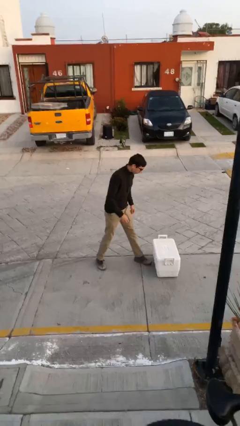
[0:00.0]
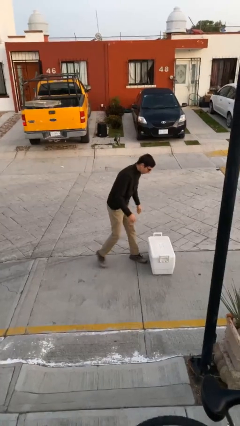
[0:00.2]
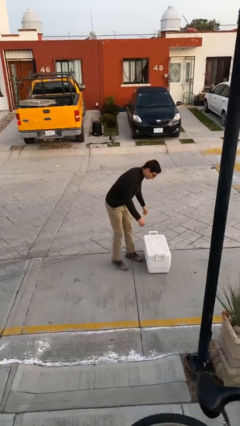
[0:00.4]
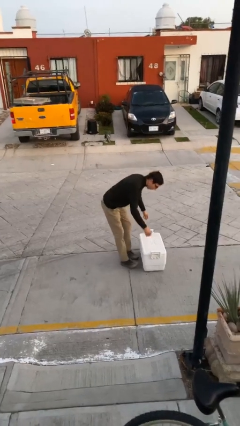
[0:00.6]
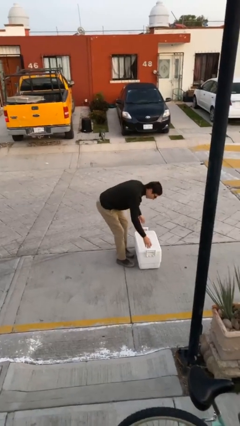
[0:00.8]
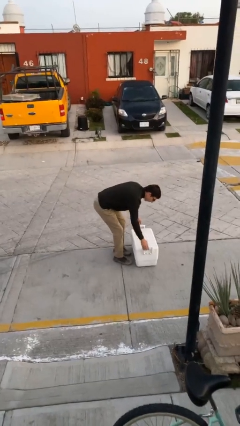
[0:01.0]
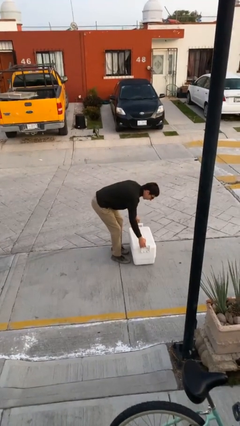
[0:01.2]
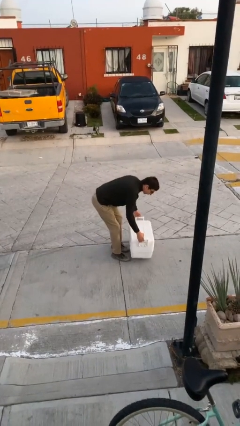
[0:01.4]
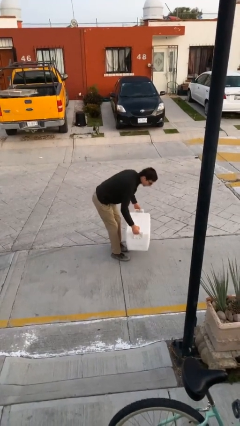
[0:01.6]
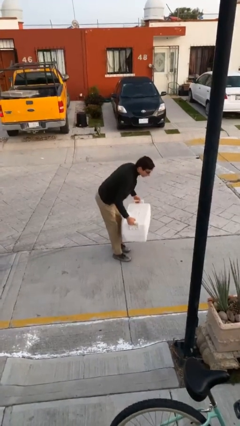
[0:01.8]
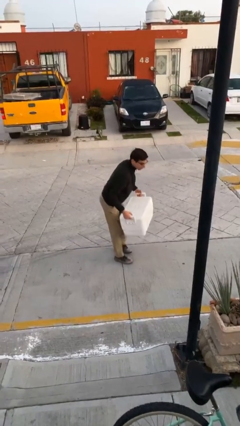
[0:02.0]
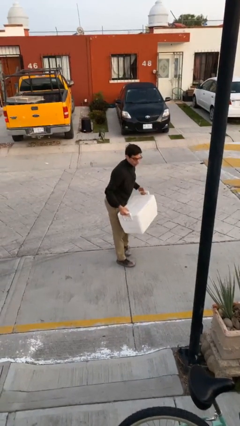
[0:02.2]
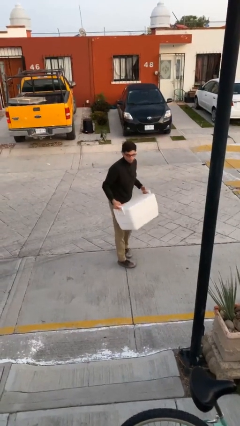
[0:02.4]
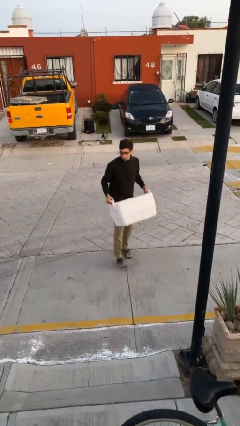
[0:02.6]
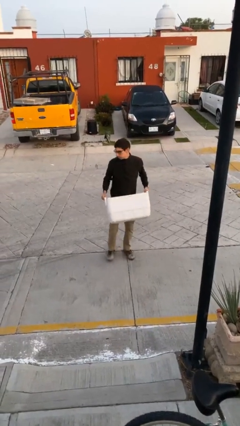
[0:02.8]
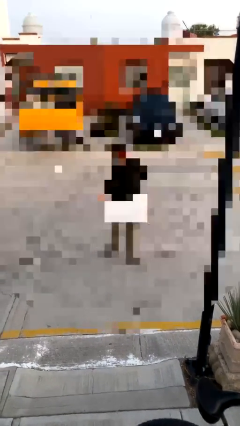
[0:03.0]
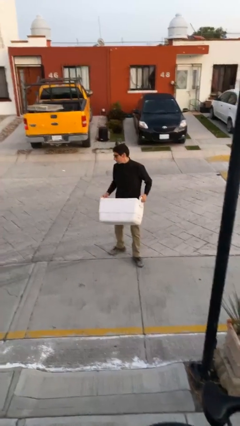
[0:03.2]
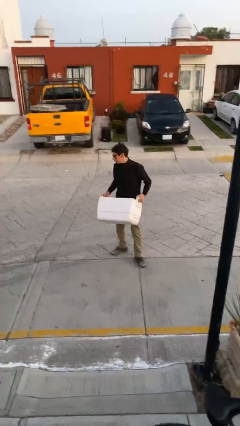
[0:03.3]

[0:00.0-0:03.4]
person picks up object from floor

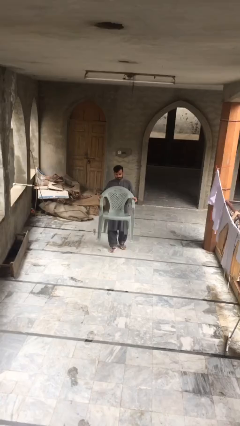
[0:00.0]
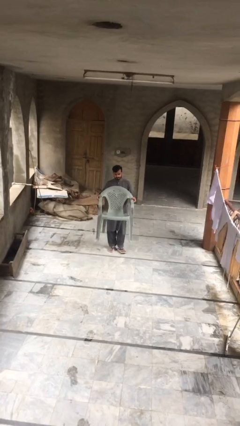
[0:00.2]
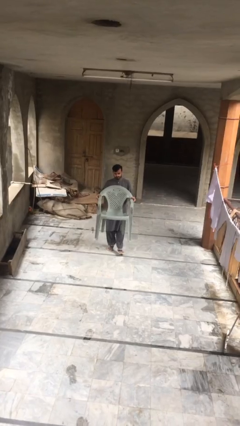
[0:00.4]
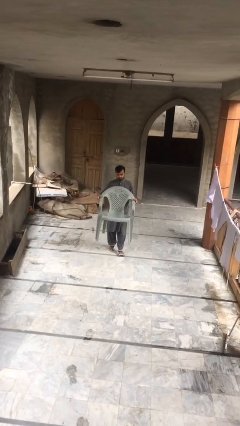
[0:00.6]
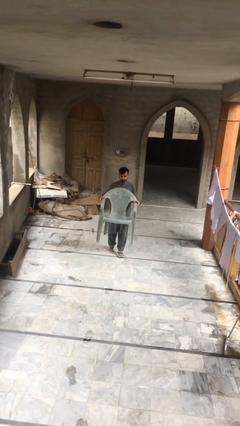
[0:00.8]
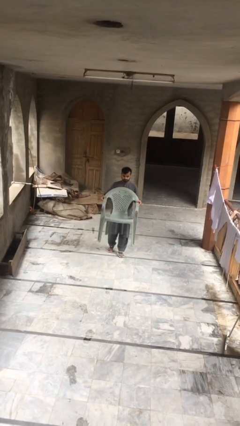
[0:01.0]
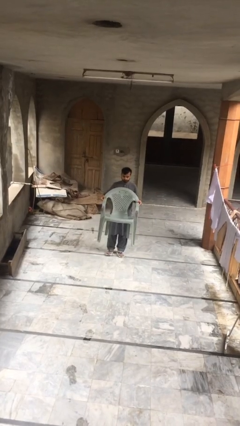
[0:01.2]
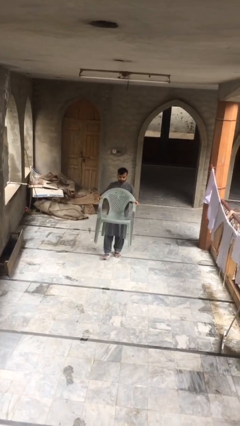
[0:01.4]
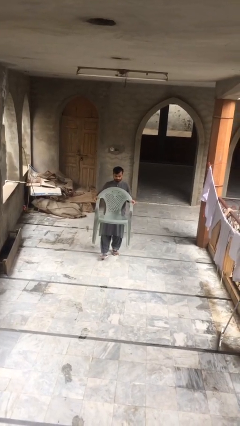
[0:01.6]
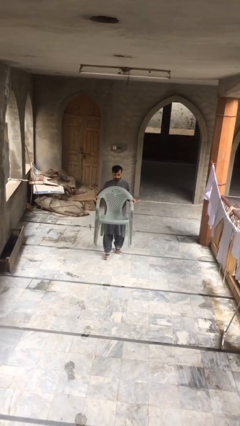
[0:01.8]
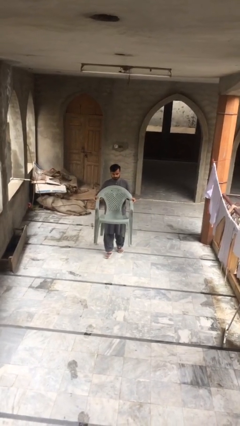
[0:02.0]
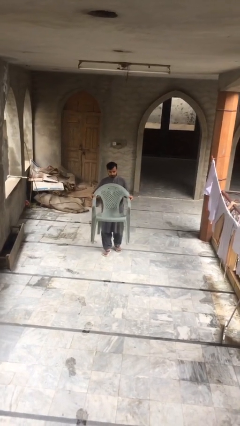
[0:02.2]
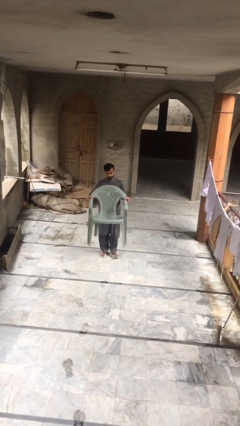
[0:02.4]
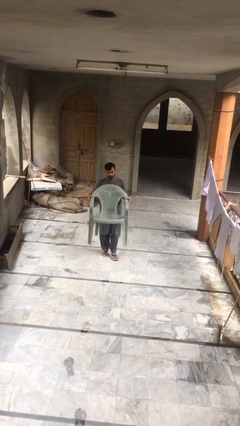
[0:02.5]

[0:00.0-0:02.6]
person carries heavy object

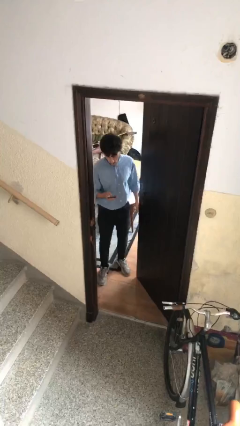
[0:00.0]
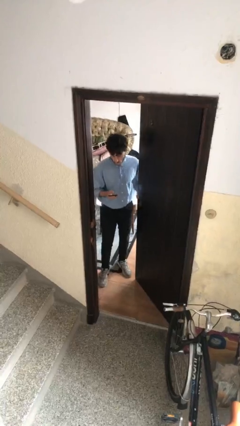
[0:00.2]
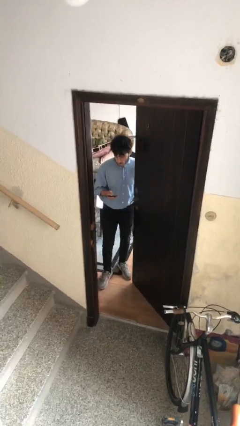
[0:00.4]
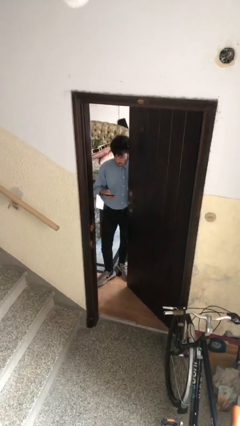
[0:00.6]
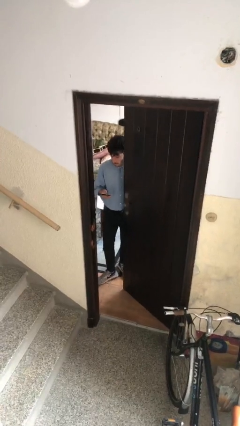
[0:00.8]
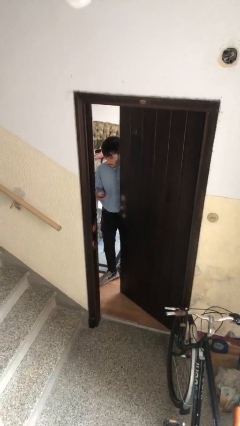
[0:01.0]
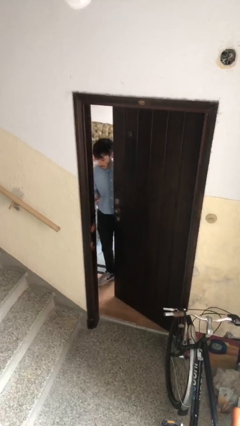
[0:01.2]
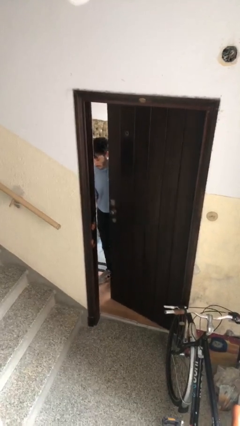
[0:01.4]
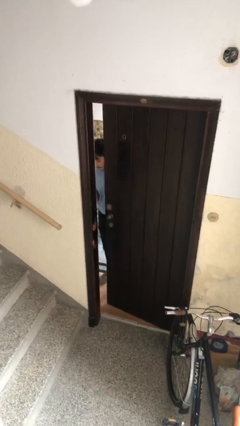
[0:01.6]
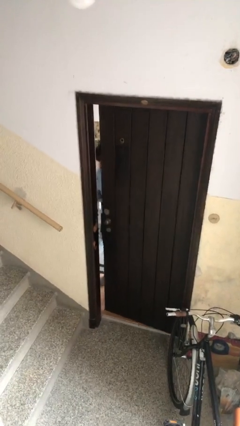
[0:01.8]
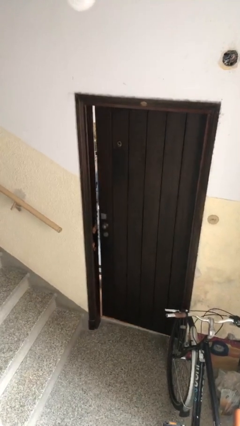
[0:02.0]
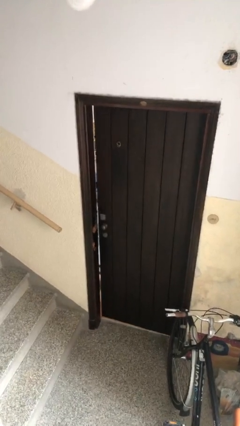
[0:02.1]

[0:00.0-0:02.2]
person closes facility door

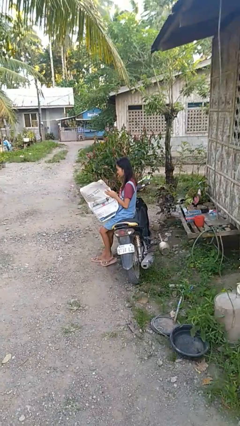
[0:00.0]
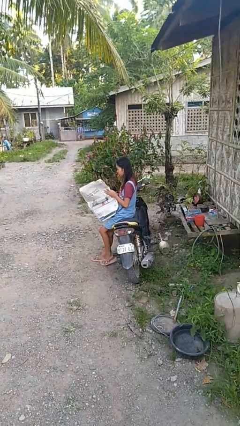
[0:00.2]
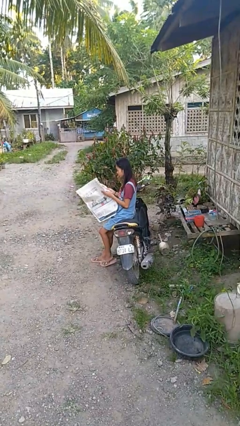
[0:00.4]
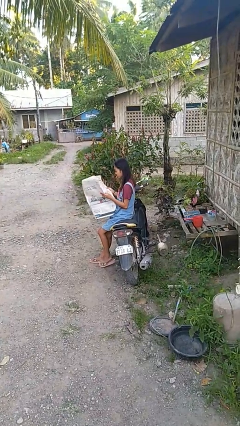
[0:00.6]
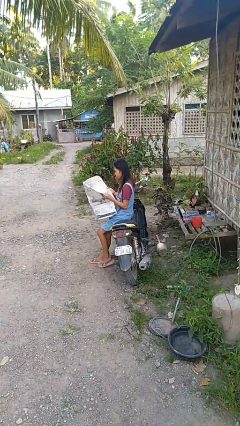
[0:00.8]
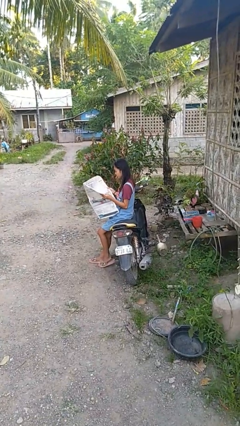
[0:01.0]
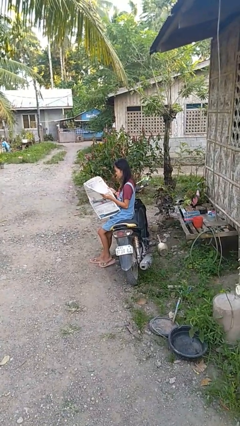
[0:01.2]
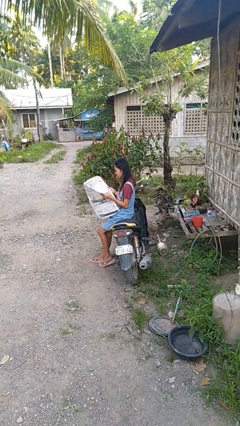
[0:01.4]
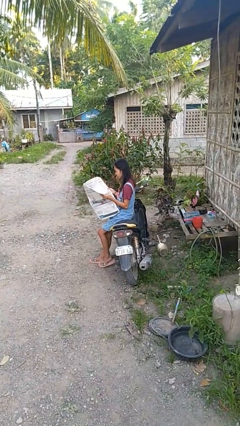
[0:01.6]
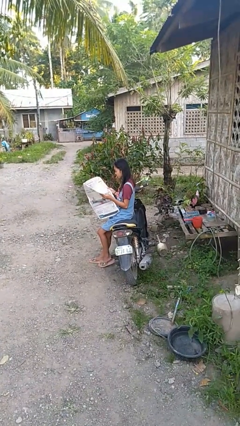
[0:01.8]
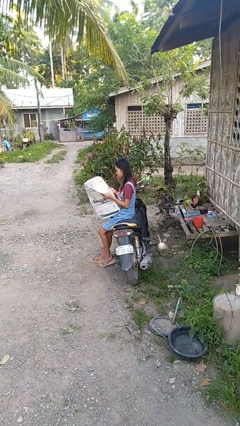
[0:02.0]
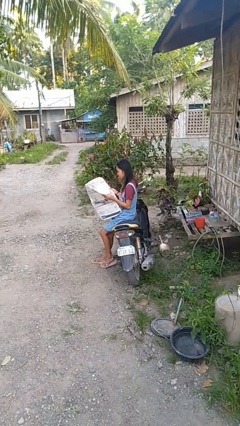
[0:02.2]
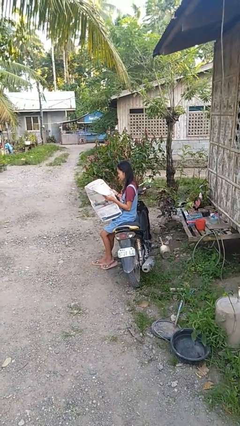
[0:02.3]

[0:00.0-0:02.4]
person reads newspaper

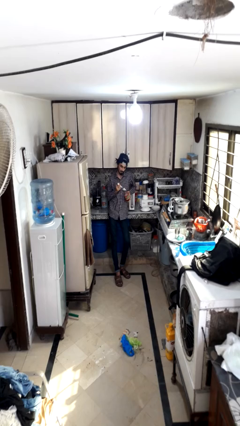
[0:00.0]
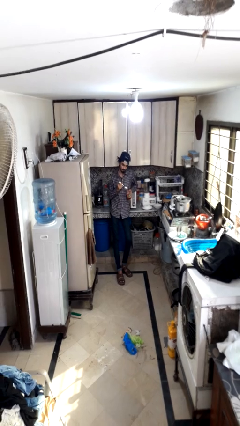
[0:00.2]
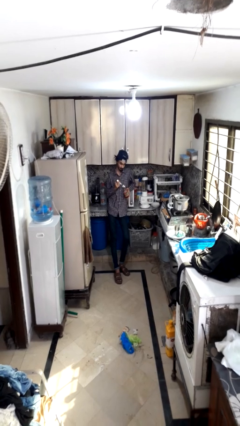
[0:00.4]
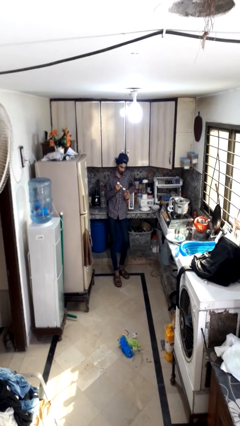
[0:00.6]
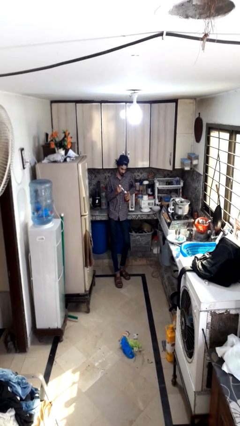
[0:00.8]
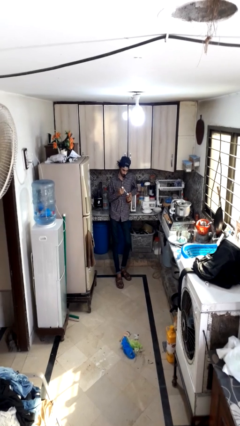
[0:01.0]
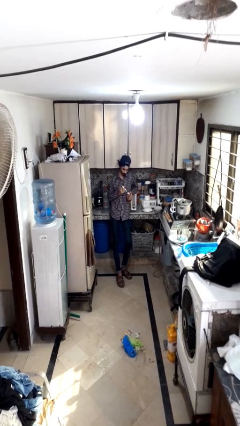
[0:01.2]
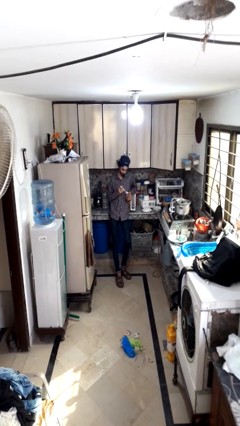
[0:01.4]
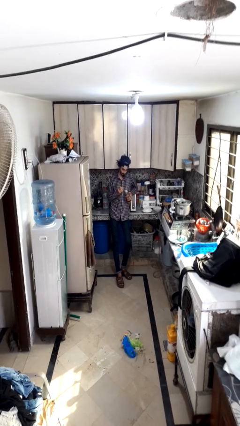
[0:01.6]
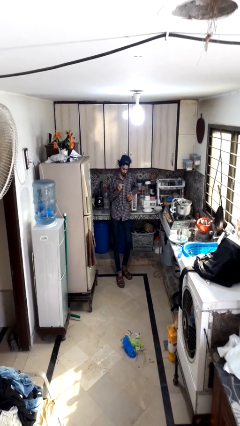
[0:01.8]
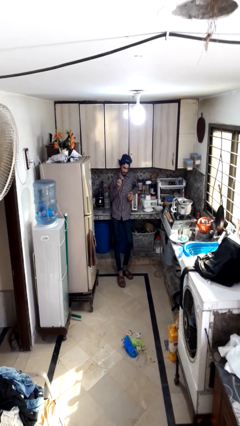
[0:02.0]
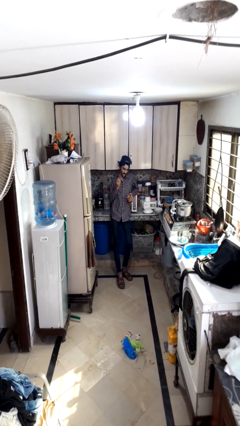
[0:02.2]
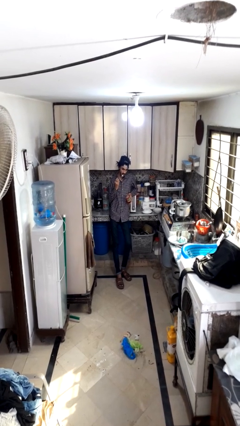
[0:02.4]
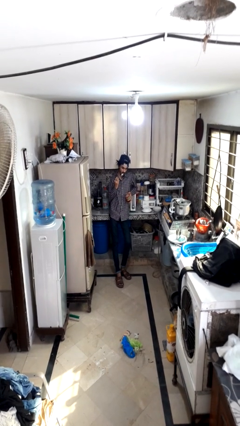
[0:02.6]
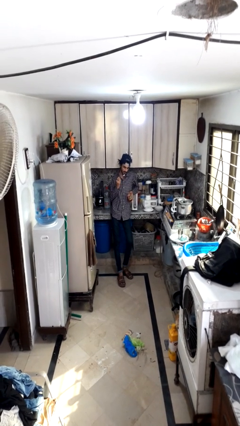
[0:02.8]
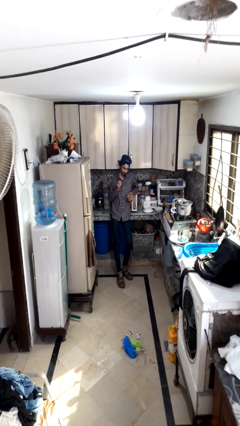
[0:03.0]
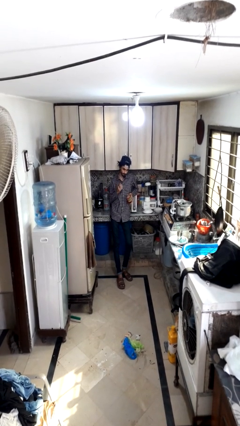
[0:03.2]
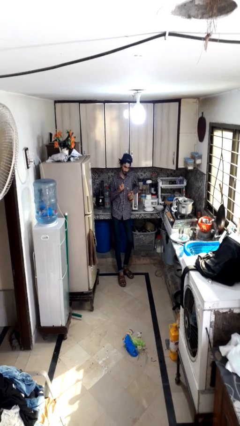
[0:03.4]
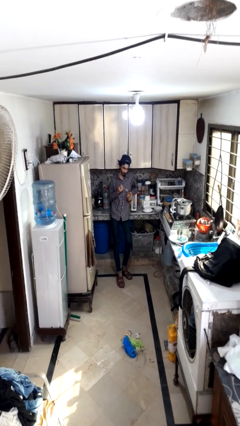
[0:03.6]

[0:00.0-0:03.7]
person eats with utensil

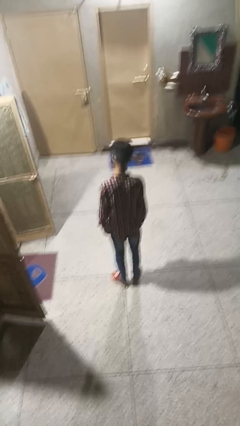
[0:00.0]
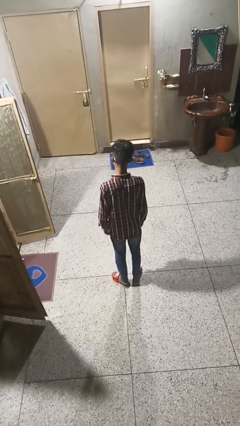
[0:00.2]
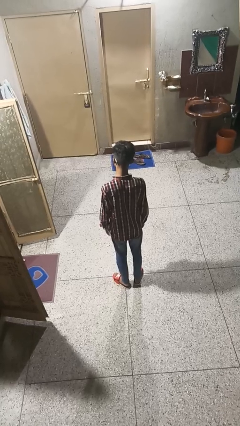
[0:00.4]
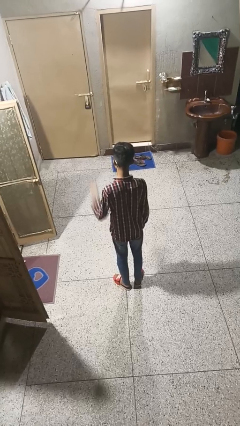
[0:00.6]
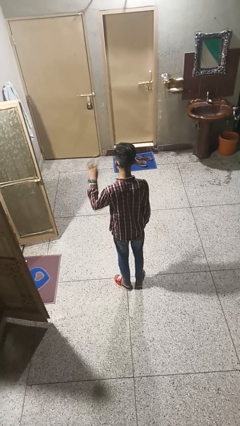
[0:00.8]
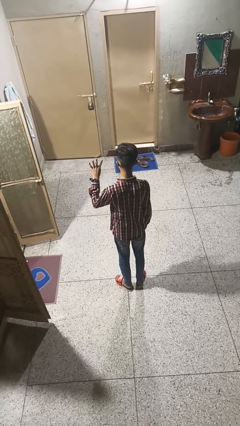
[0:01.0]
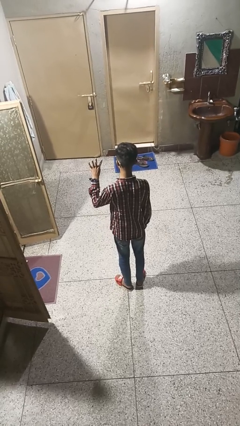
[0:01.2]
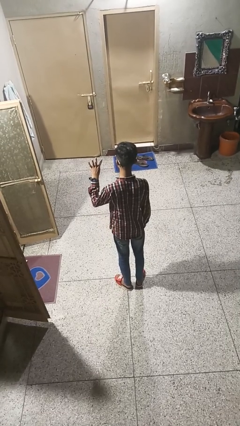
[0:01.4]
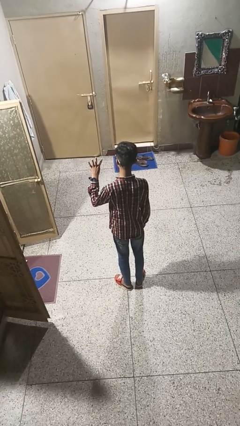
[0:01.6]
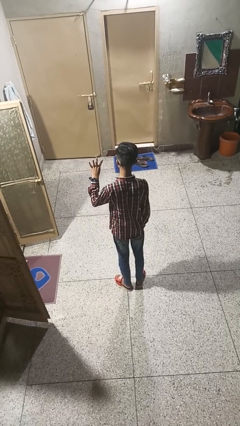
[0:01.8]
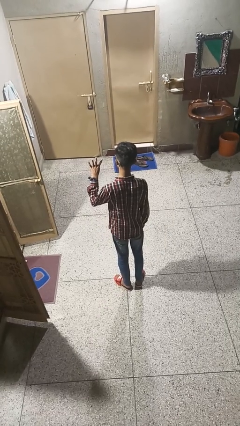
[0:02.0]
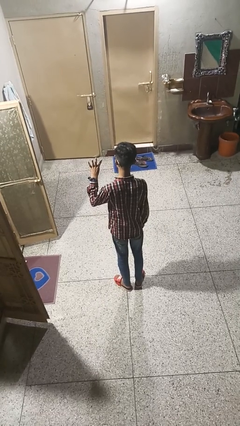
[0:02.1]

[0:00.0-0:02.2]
person gestures number four

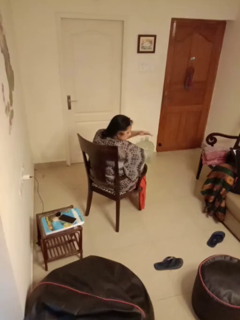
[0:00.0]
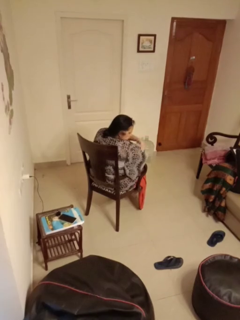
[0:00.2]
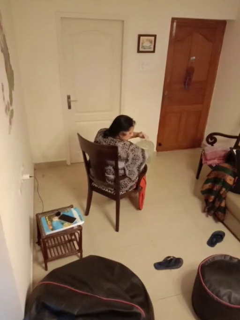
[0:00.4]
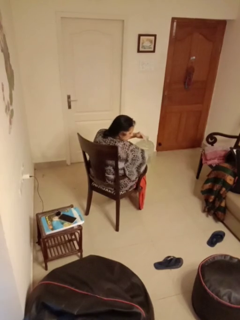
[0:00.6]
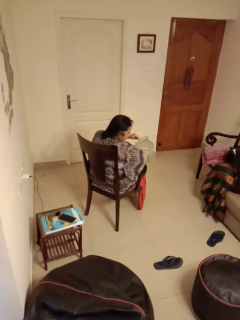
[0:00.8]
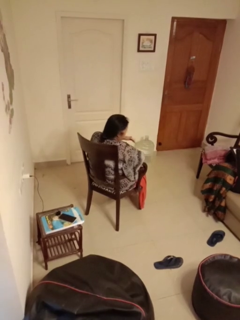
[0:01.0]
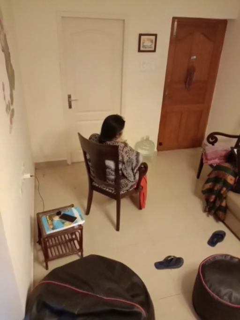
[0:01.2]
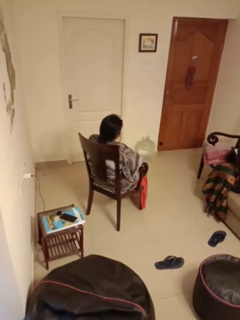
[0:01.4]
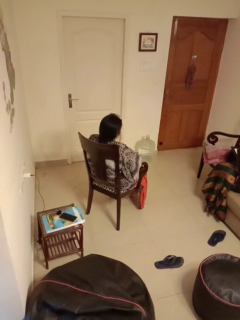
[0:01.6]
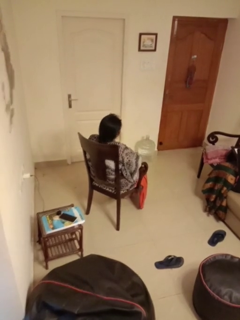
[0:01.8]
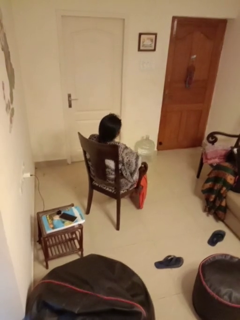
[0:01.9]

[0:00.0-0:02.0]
person swats bug
